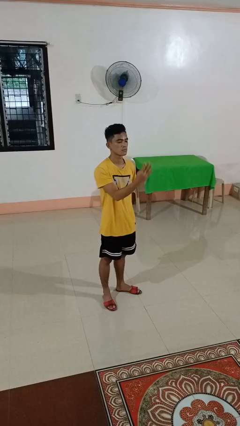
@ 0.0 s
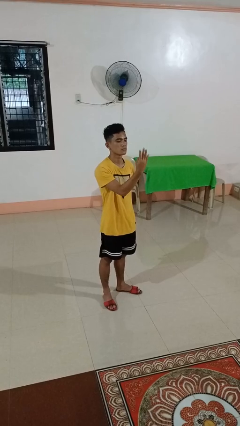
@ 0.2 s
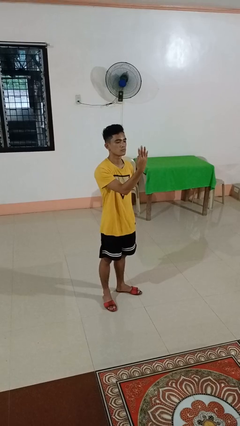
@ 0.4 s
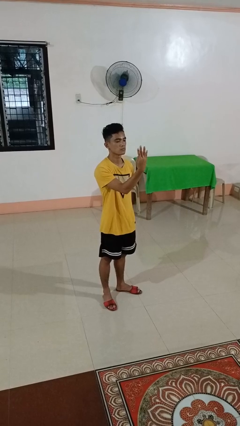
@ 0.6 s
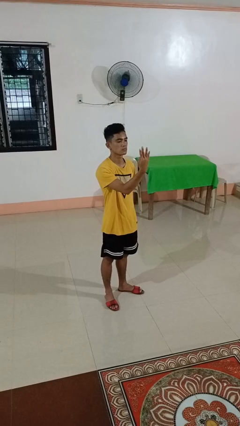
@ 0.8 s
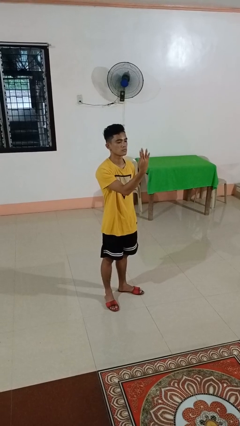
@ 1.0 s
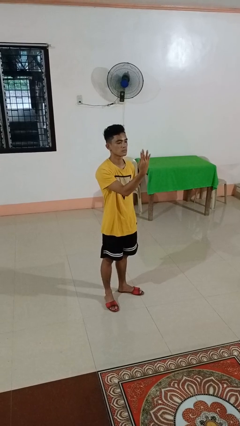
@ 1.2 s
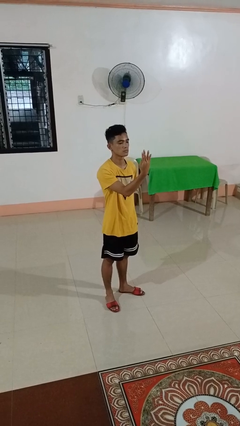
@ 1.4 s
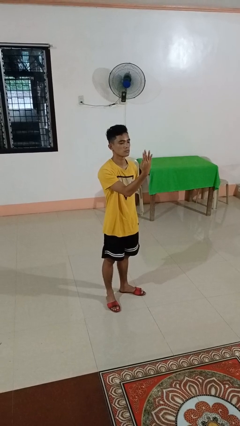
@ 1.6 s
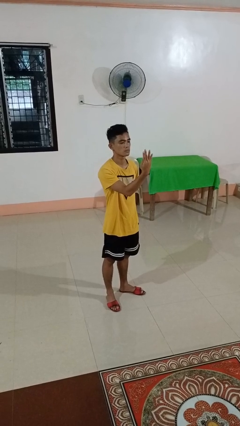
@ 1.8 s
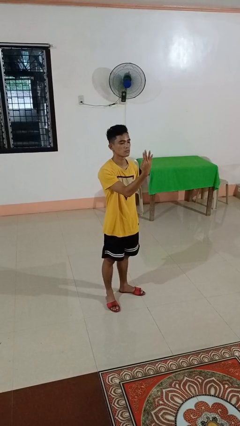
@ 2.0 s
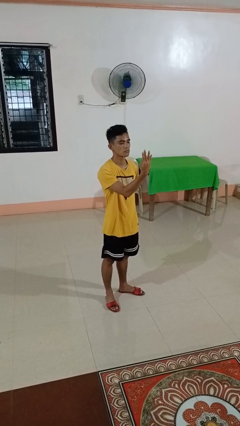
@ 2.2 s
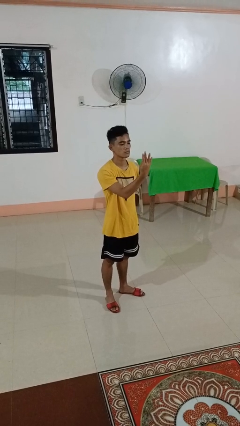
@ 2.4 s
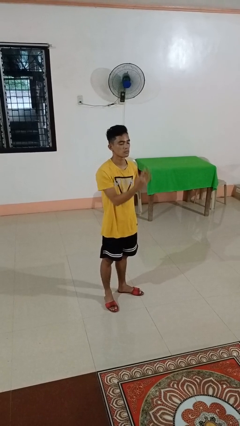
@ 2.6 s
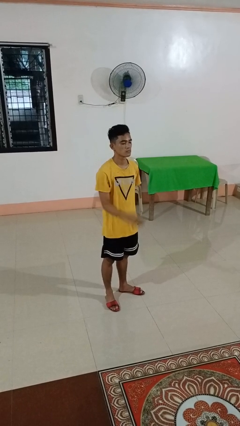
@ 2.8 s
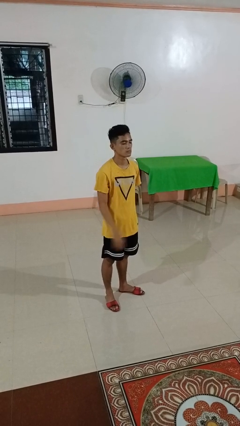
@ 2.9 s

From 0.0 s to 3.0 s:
person gestures number four

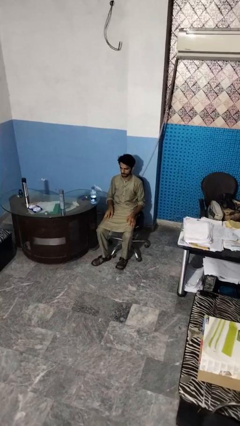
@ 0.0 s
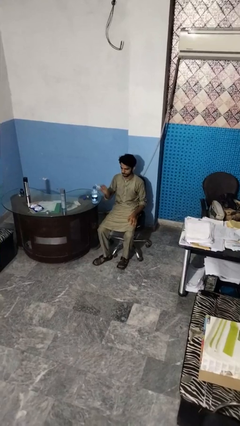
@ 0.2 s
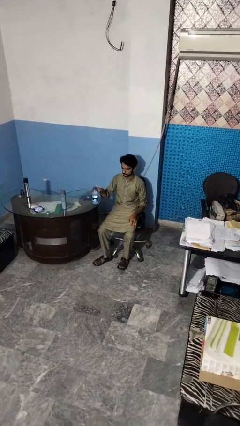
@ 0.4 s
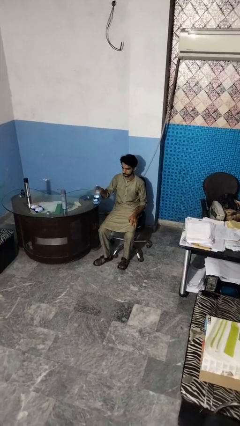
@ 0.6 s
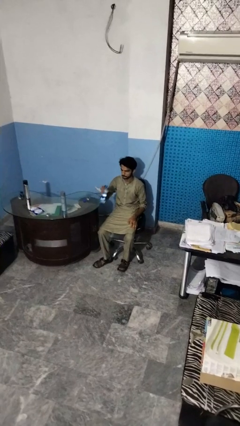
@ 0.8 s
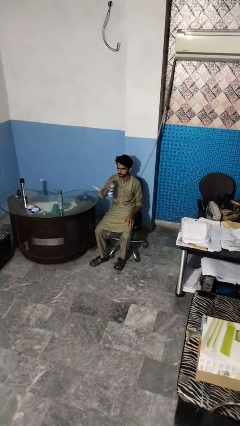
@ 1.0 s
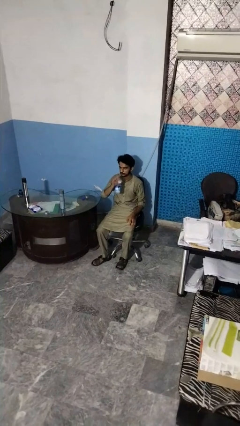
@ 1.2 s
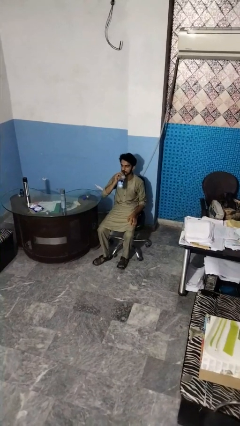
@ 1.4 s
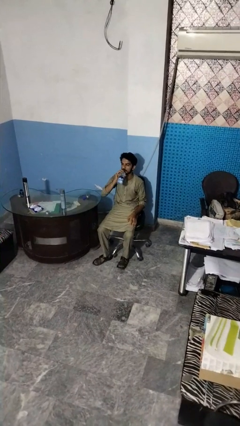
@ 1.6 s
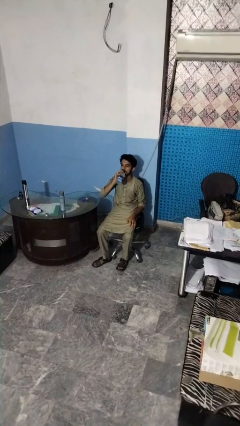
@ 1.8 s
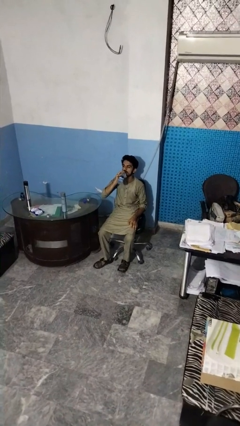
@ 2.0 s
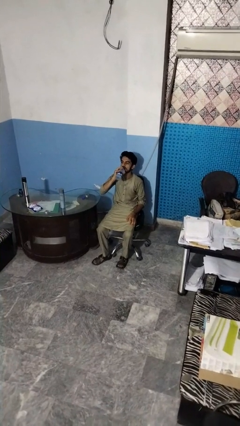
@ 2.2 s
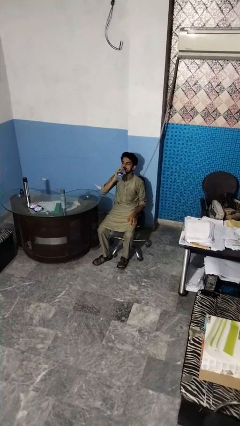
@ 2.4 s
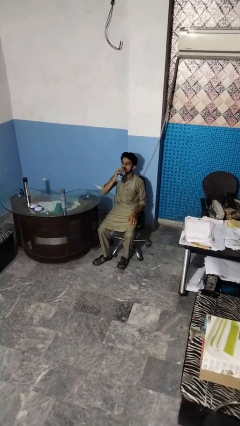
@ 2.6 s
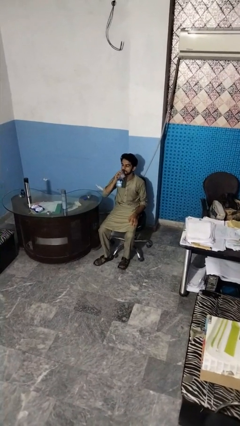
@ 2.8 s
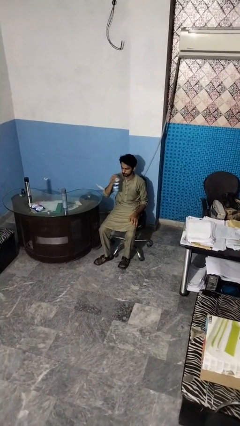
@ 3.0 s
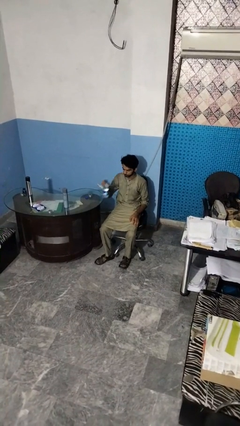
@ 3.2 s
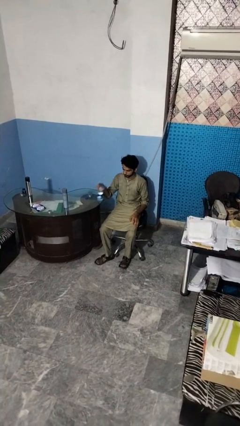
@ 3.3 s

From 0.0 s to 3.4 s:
person drinks from bottle

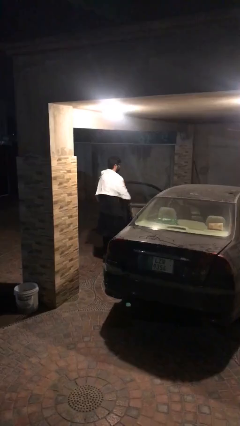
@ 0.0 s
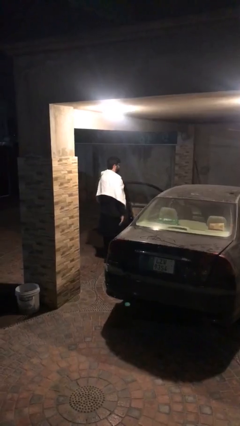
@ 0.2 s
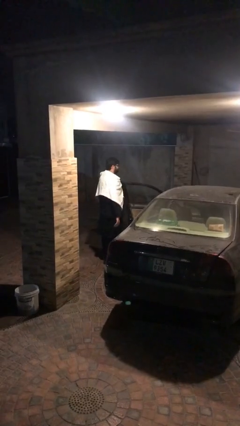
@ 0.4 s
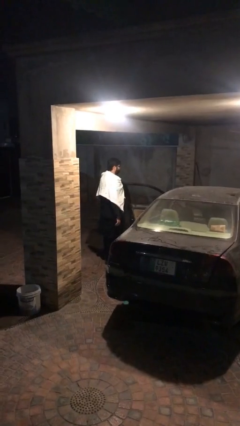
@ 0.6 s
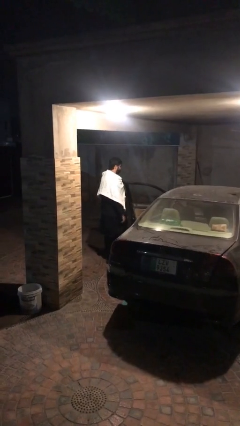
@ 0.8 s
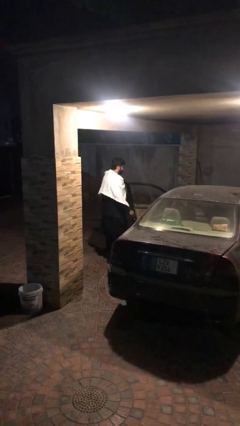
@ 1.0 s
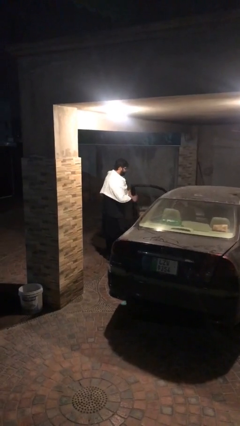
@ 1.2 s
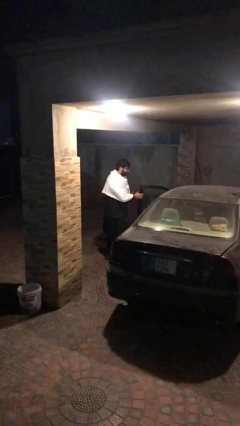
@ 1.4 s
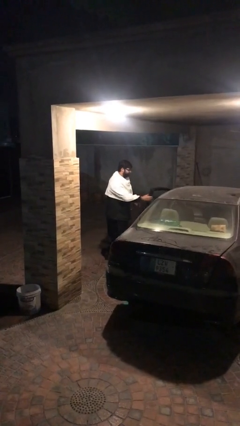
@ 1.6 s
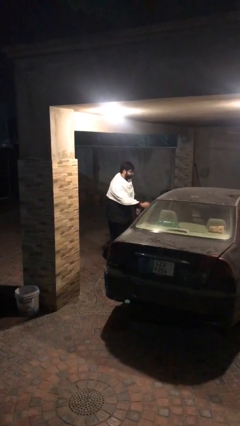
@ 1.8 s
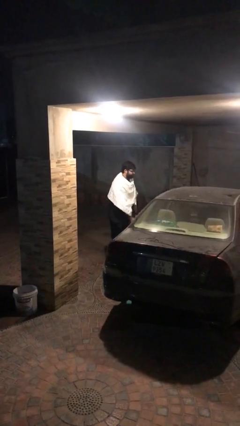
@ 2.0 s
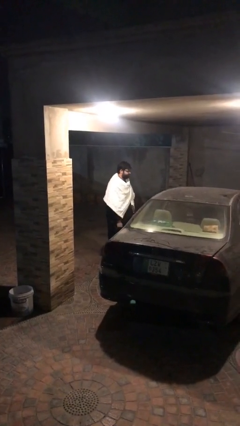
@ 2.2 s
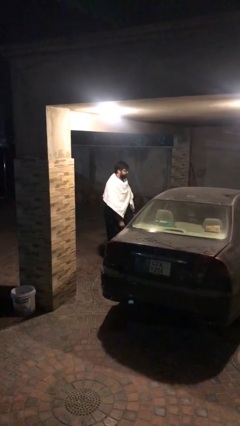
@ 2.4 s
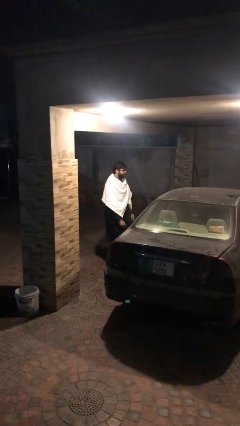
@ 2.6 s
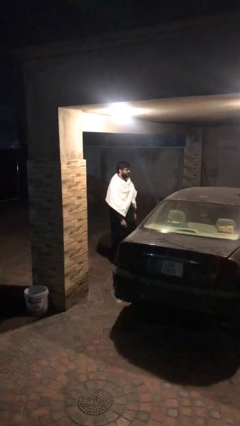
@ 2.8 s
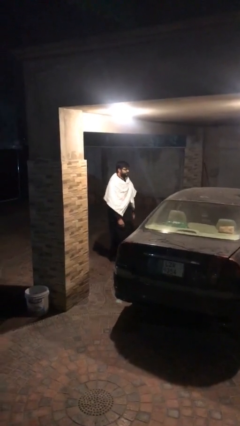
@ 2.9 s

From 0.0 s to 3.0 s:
person closes car door

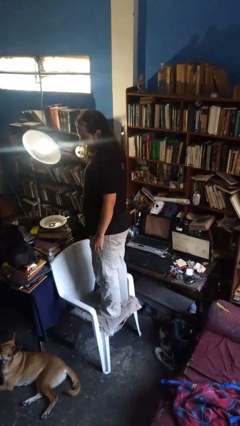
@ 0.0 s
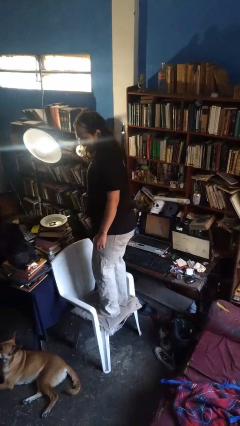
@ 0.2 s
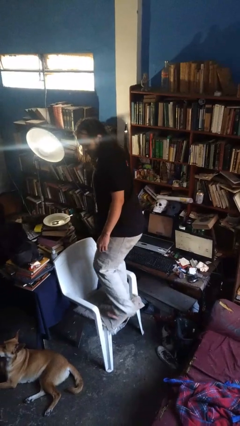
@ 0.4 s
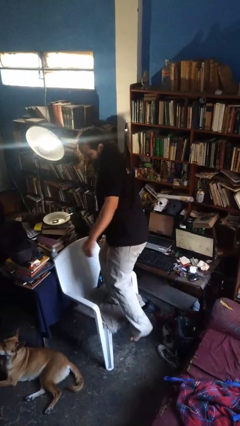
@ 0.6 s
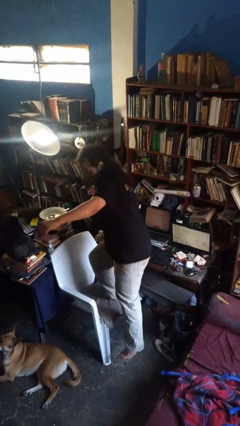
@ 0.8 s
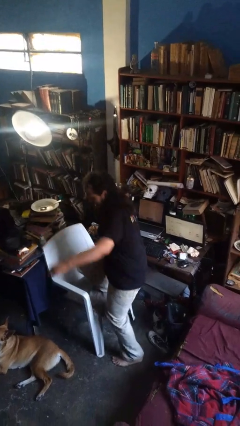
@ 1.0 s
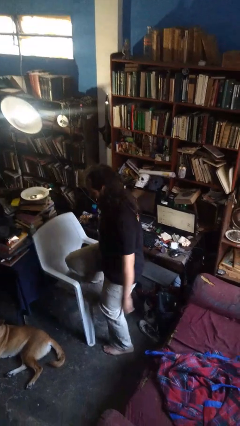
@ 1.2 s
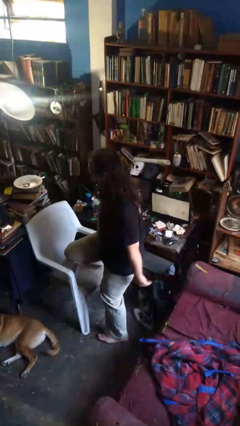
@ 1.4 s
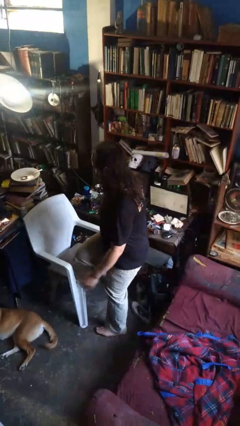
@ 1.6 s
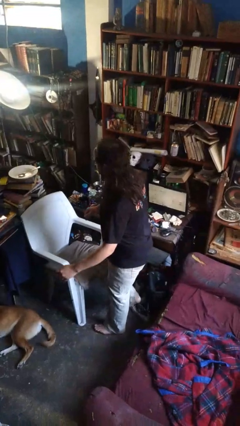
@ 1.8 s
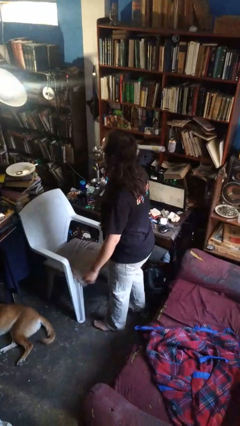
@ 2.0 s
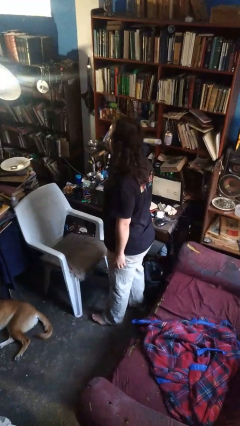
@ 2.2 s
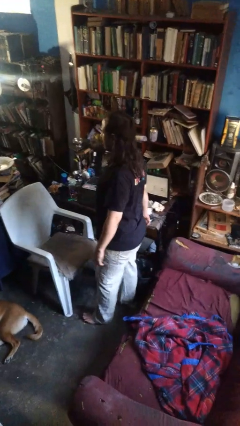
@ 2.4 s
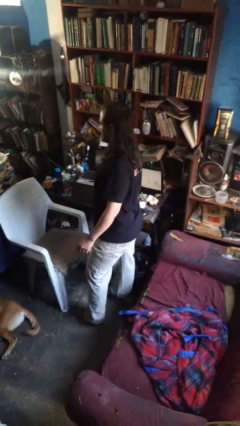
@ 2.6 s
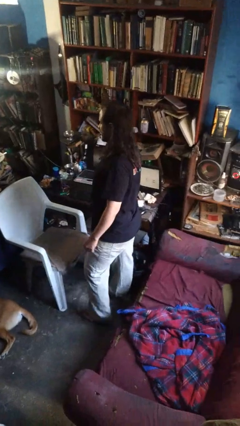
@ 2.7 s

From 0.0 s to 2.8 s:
person climbs off chair

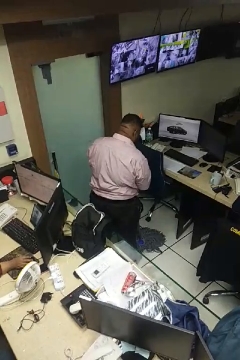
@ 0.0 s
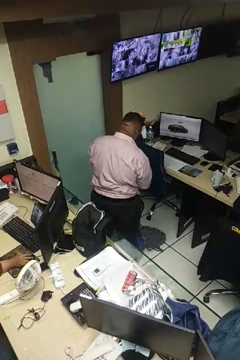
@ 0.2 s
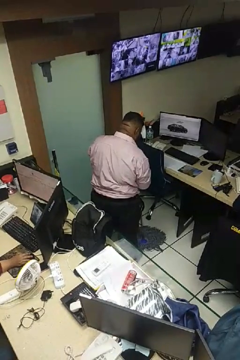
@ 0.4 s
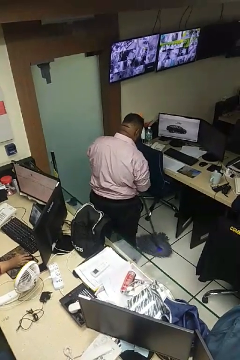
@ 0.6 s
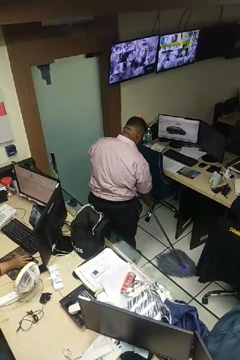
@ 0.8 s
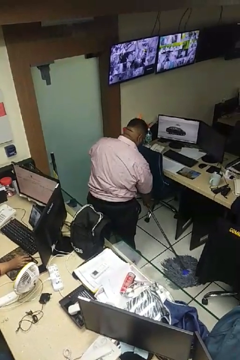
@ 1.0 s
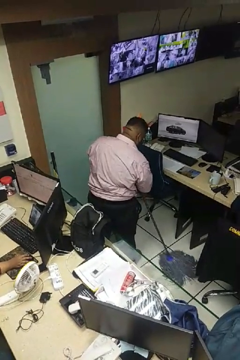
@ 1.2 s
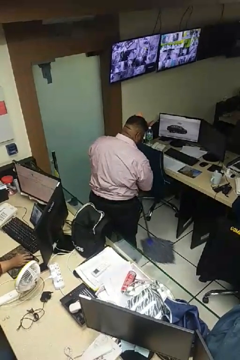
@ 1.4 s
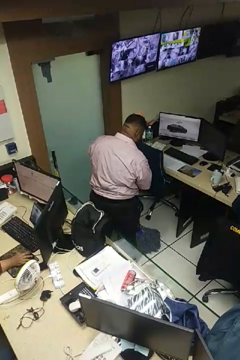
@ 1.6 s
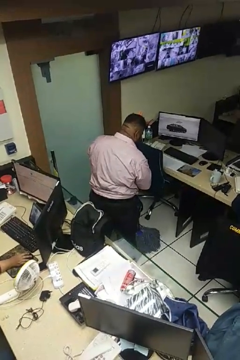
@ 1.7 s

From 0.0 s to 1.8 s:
person mops

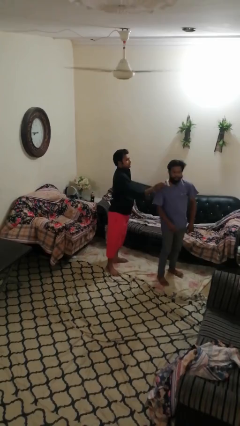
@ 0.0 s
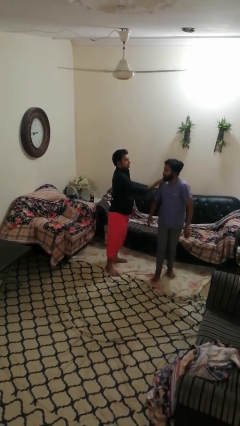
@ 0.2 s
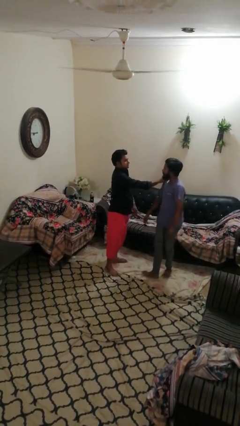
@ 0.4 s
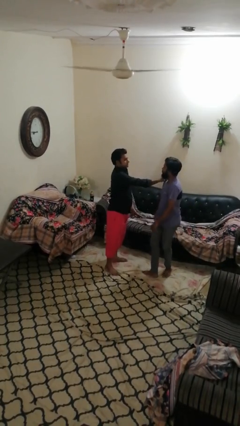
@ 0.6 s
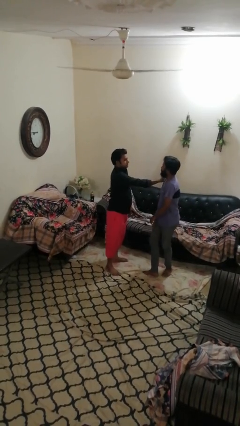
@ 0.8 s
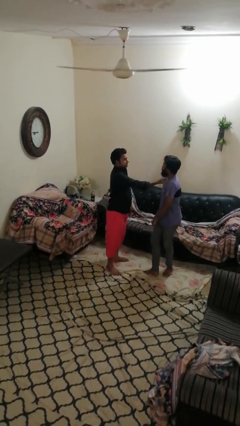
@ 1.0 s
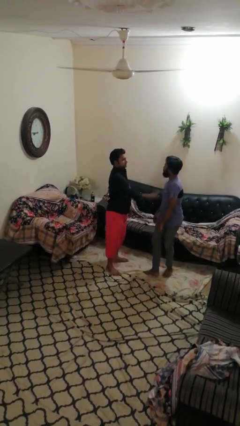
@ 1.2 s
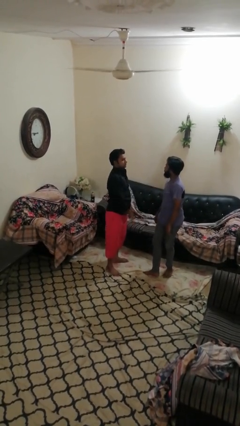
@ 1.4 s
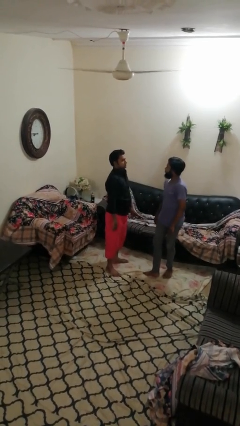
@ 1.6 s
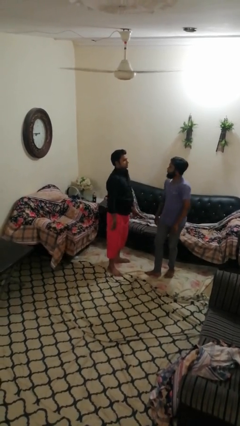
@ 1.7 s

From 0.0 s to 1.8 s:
person spins person around

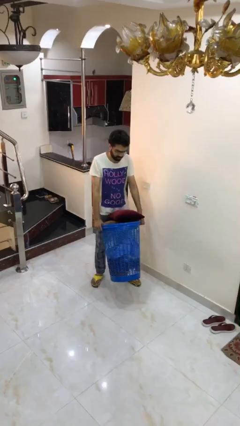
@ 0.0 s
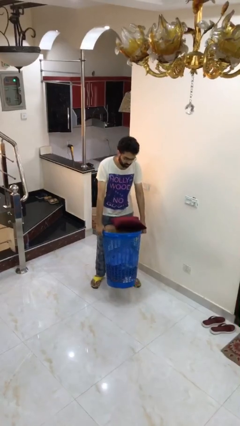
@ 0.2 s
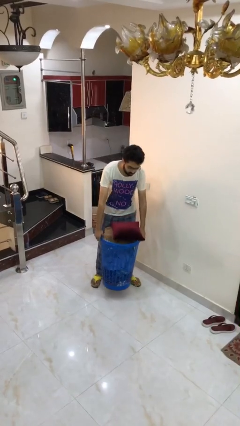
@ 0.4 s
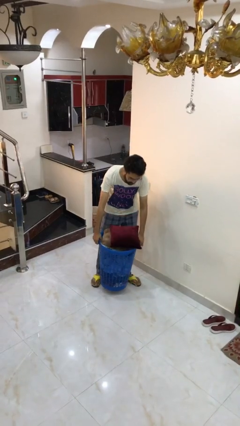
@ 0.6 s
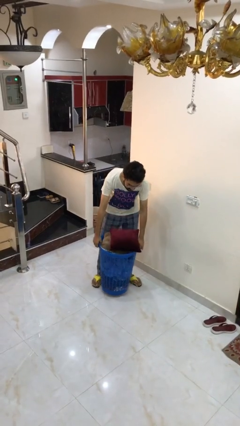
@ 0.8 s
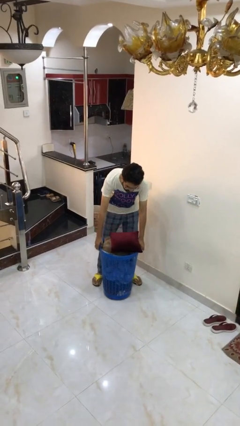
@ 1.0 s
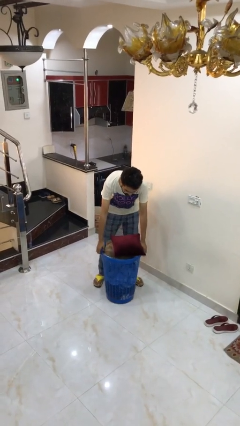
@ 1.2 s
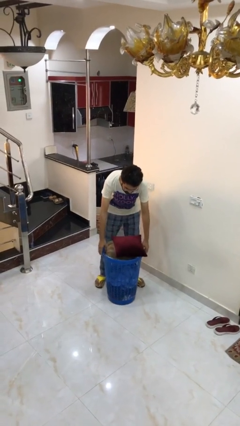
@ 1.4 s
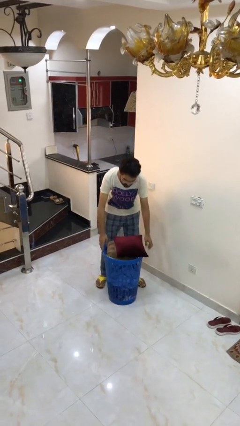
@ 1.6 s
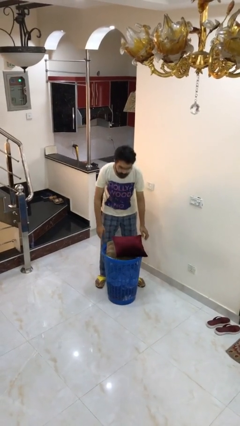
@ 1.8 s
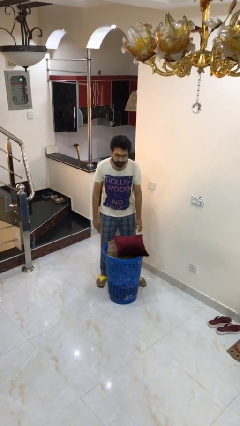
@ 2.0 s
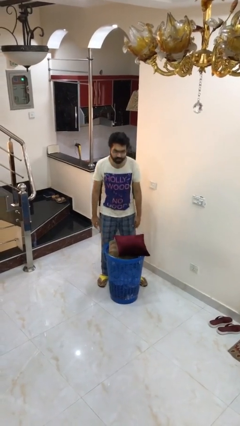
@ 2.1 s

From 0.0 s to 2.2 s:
person puts down object on floor
